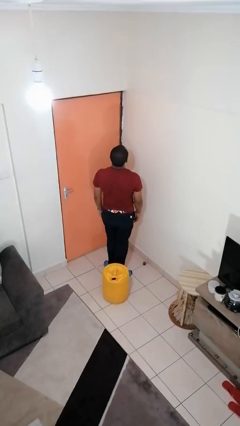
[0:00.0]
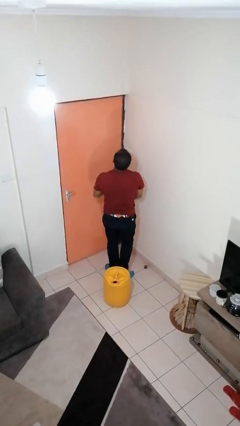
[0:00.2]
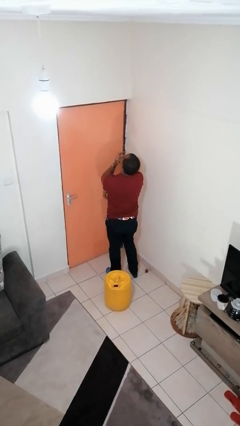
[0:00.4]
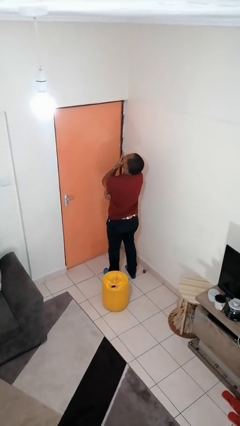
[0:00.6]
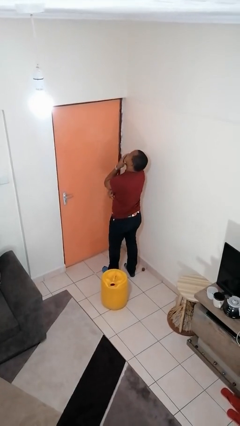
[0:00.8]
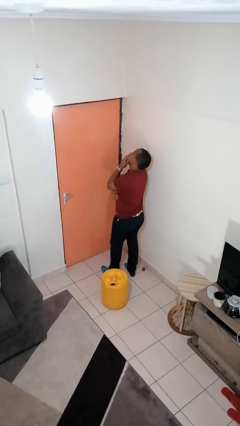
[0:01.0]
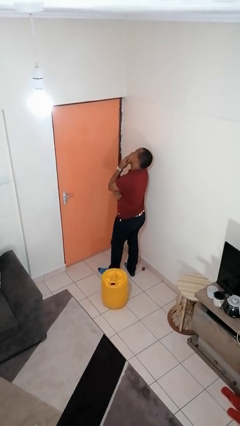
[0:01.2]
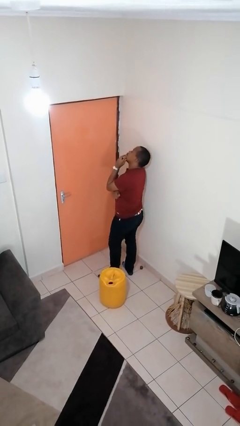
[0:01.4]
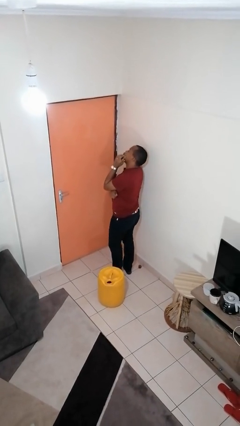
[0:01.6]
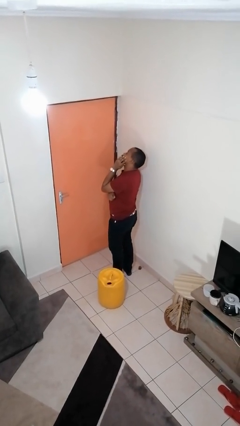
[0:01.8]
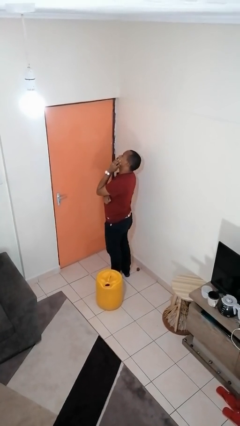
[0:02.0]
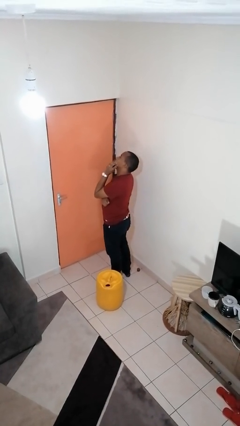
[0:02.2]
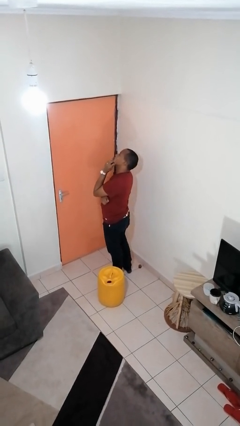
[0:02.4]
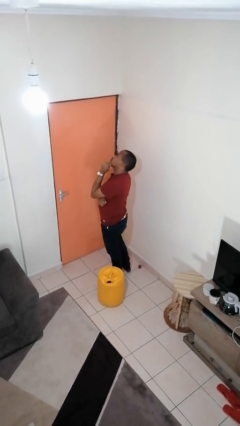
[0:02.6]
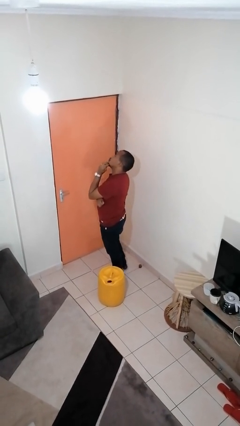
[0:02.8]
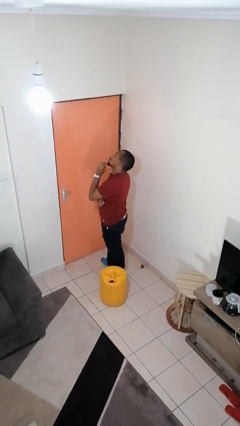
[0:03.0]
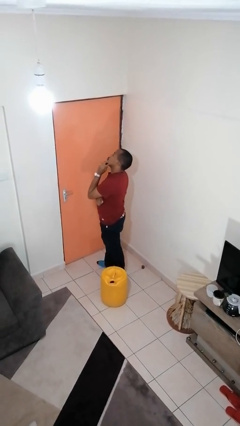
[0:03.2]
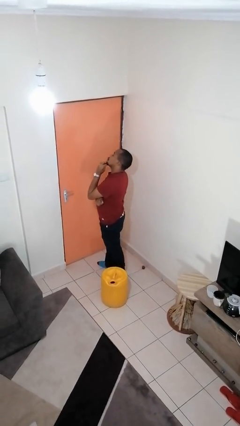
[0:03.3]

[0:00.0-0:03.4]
person strokes chin

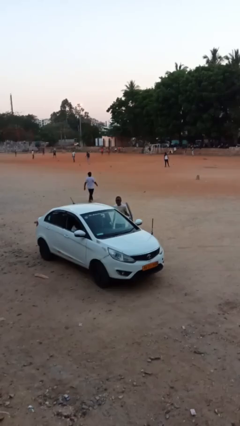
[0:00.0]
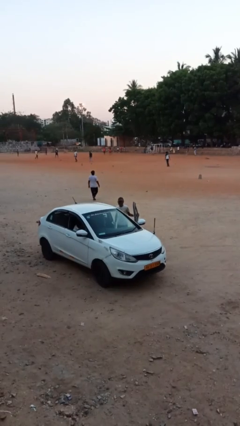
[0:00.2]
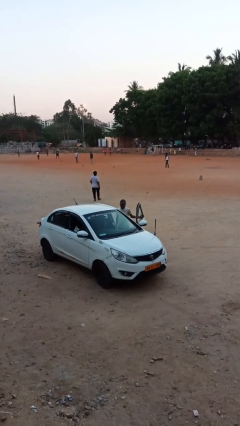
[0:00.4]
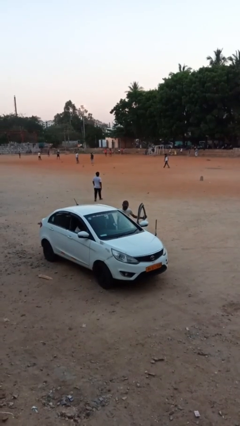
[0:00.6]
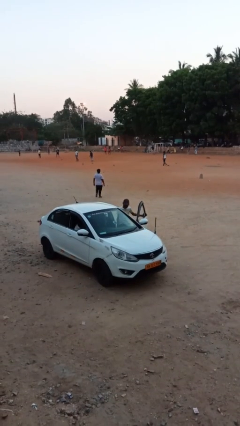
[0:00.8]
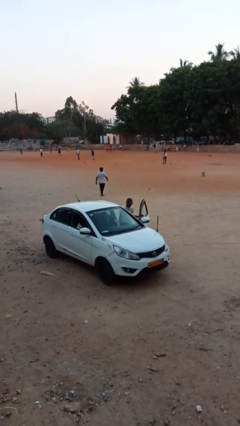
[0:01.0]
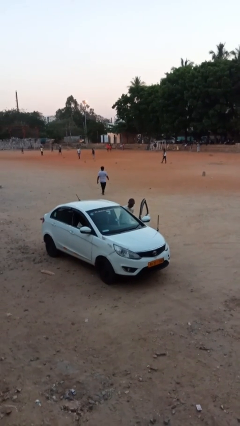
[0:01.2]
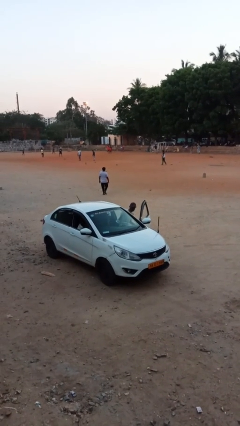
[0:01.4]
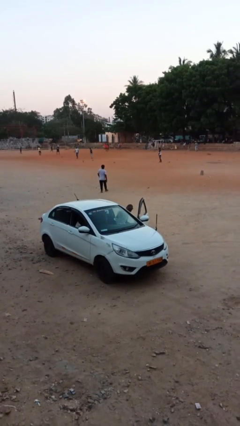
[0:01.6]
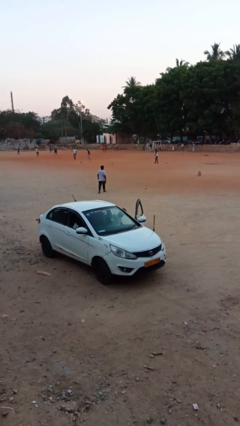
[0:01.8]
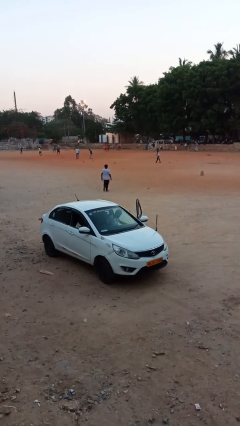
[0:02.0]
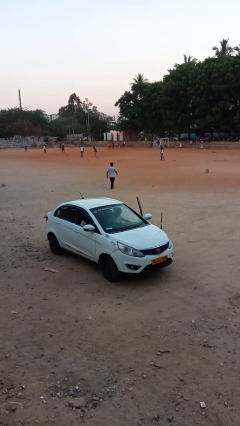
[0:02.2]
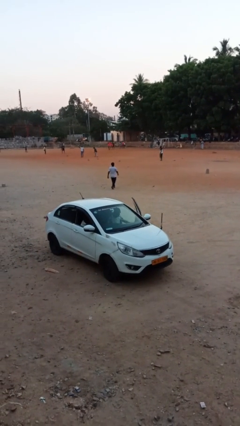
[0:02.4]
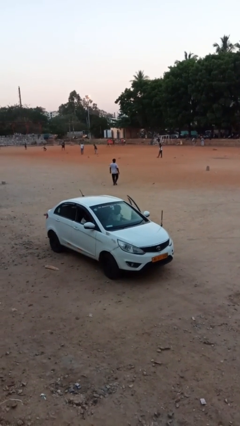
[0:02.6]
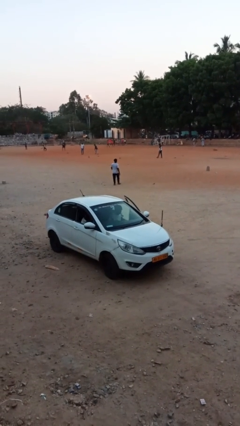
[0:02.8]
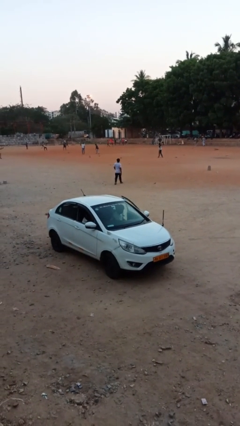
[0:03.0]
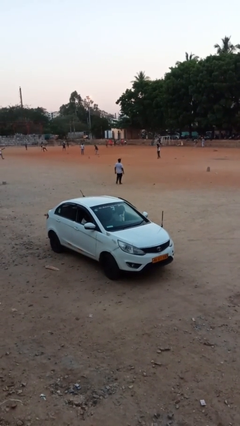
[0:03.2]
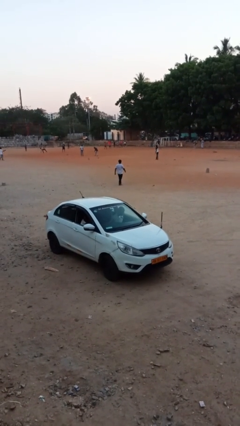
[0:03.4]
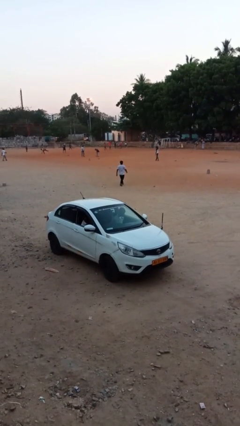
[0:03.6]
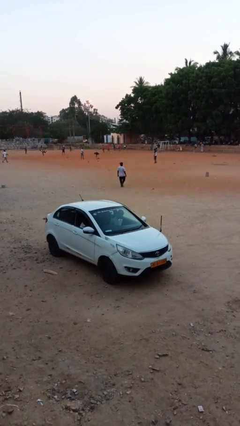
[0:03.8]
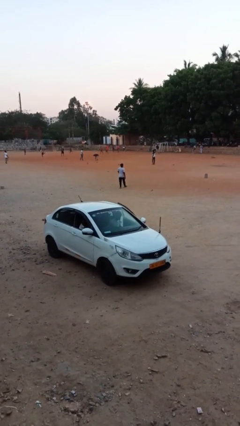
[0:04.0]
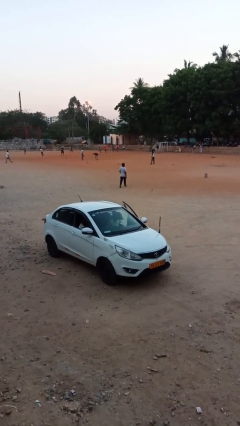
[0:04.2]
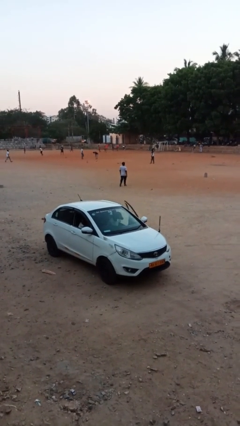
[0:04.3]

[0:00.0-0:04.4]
person enters car

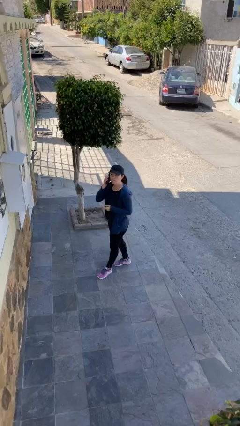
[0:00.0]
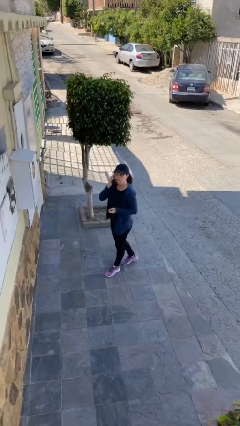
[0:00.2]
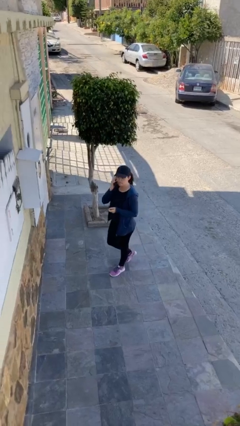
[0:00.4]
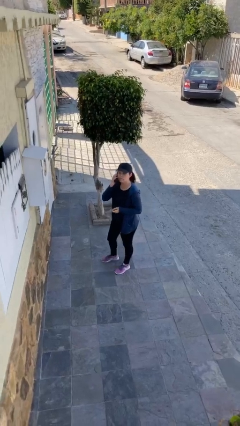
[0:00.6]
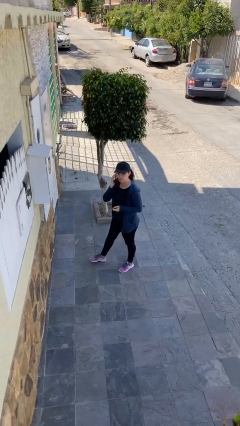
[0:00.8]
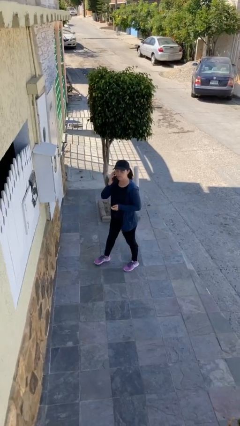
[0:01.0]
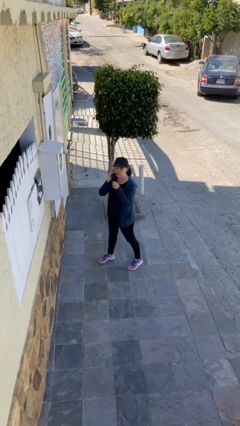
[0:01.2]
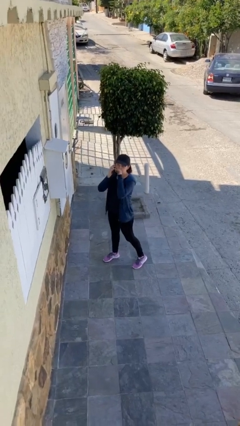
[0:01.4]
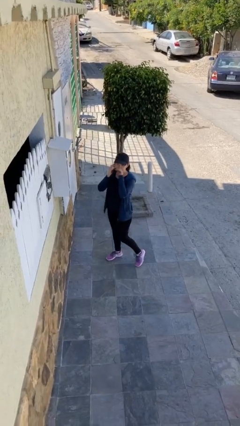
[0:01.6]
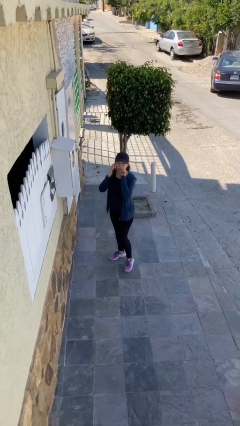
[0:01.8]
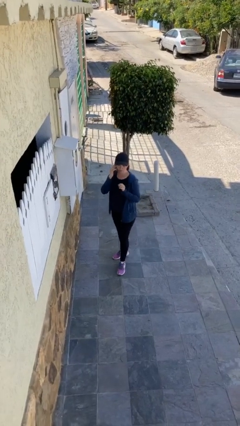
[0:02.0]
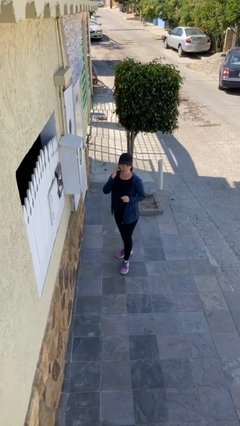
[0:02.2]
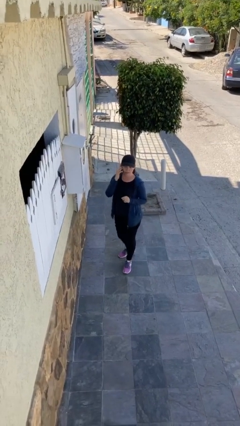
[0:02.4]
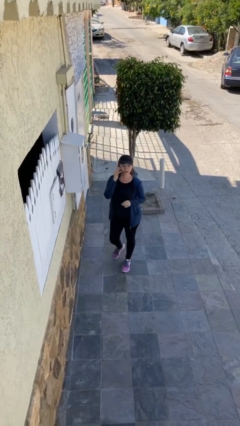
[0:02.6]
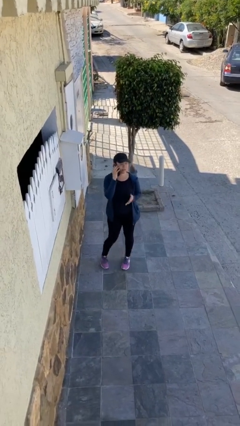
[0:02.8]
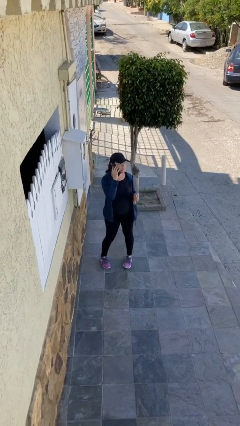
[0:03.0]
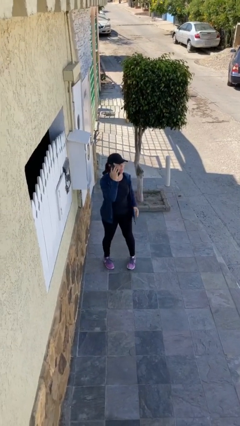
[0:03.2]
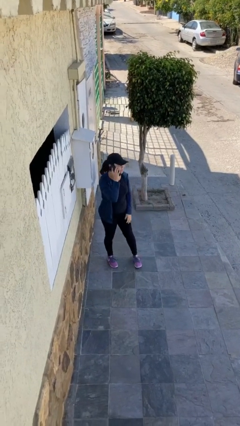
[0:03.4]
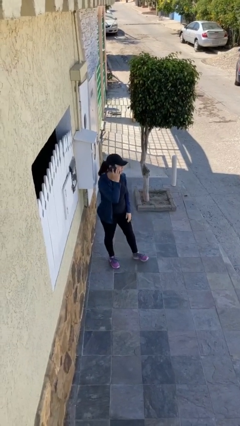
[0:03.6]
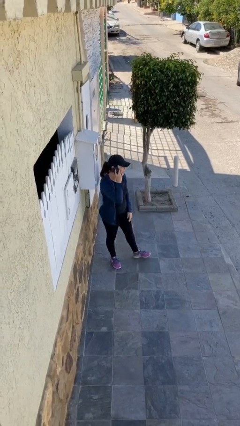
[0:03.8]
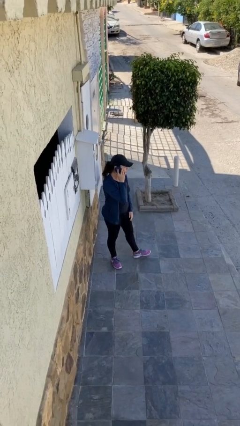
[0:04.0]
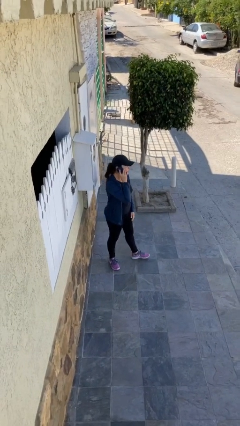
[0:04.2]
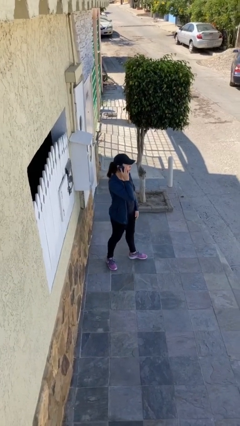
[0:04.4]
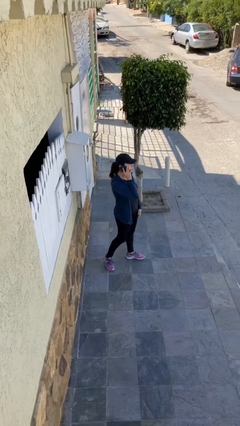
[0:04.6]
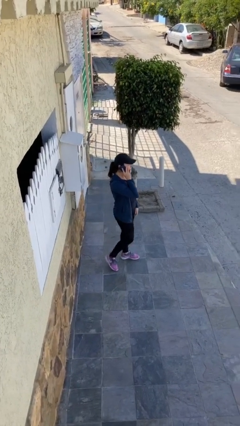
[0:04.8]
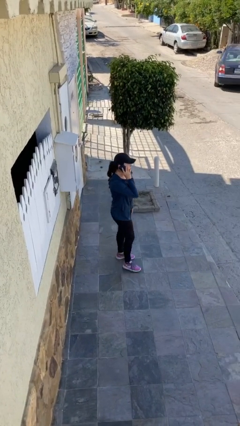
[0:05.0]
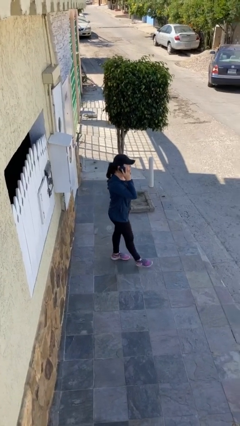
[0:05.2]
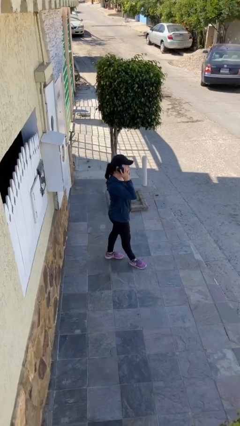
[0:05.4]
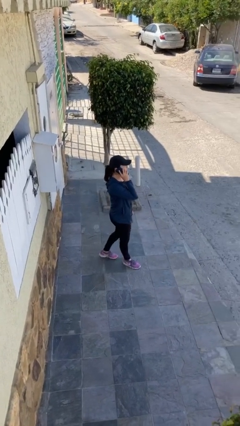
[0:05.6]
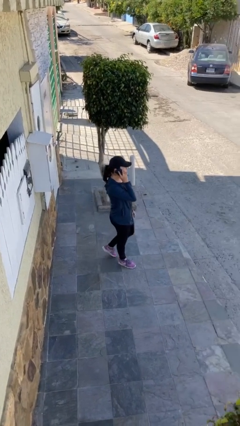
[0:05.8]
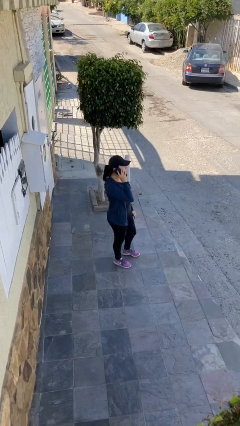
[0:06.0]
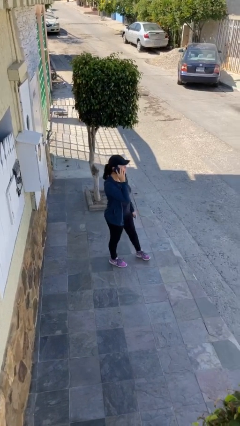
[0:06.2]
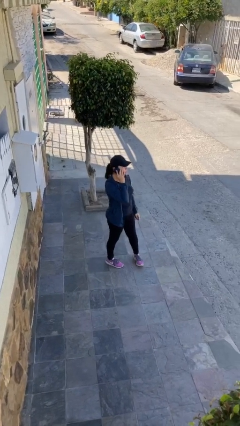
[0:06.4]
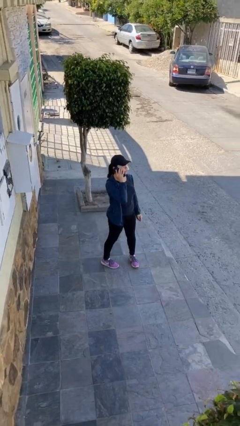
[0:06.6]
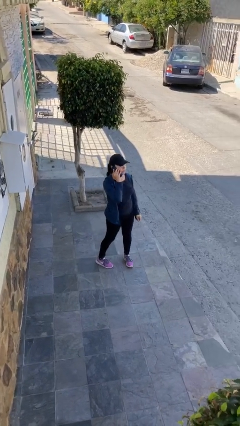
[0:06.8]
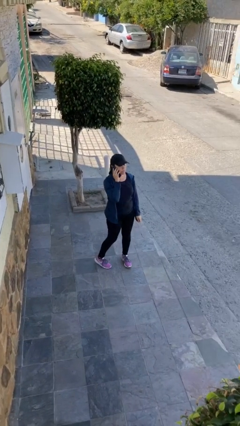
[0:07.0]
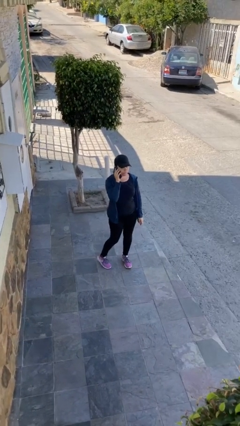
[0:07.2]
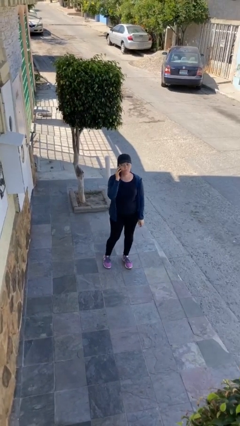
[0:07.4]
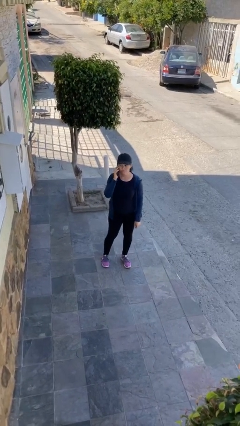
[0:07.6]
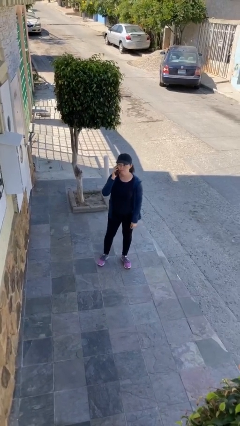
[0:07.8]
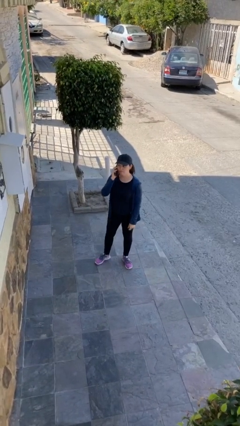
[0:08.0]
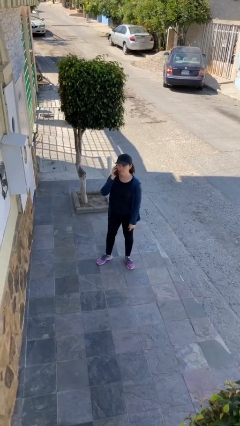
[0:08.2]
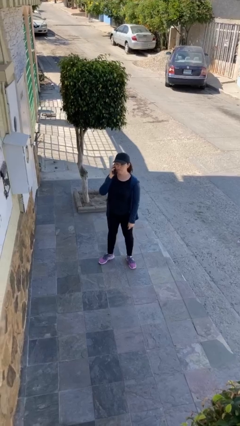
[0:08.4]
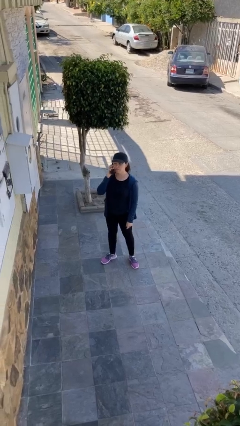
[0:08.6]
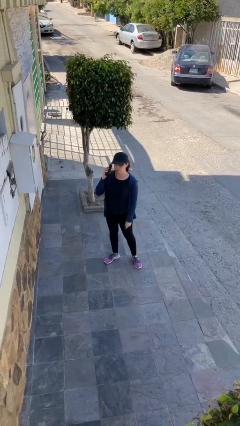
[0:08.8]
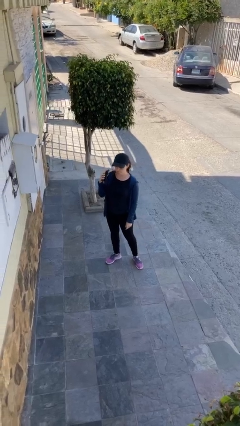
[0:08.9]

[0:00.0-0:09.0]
person talks on phone

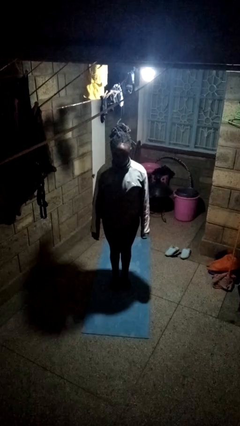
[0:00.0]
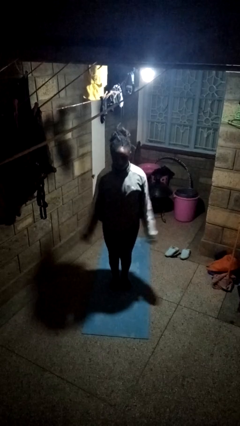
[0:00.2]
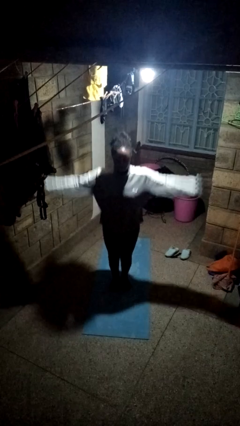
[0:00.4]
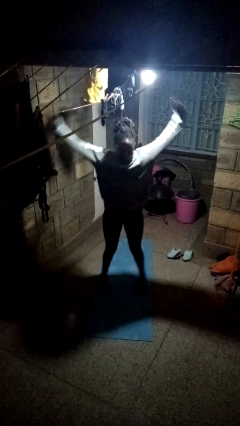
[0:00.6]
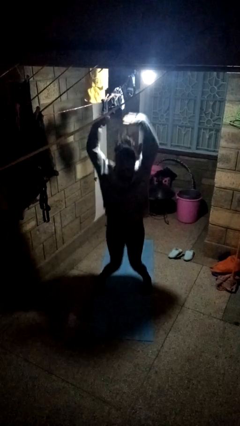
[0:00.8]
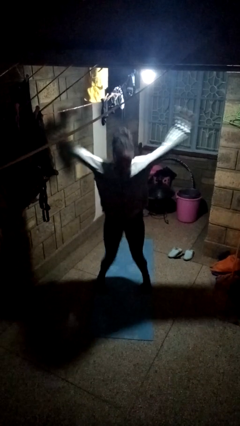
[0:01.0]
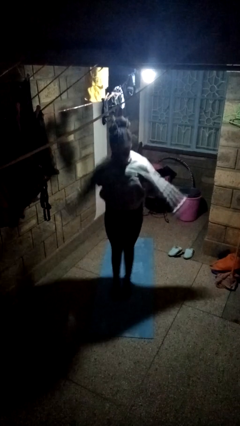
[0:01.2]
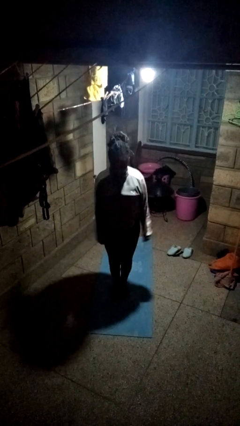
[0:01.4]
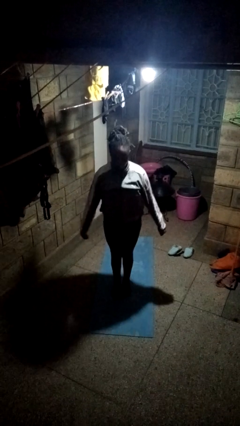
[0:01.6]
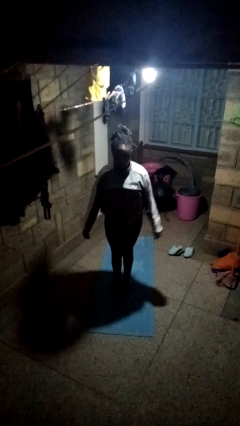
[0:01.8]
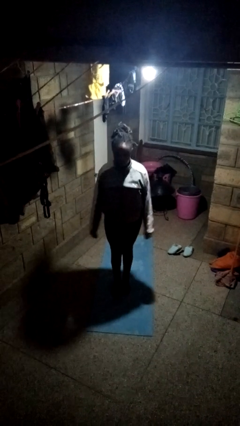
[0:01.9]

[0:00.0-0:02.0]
person exercises with jumping jacks
